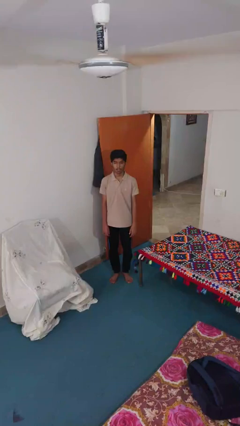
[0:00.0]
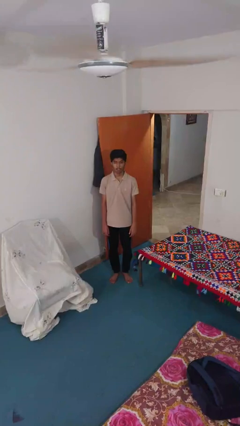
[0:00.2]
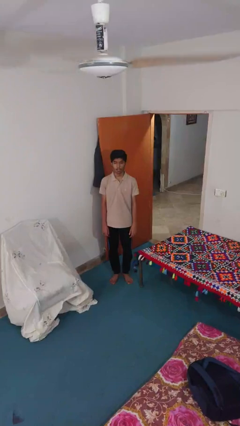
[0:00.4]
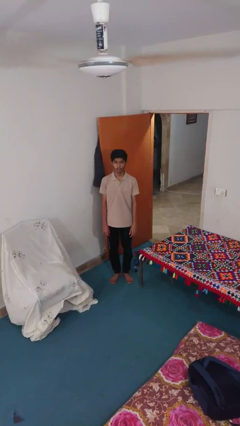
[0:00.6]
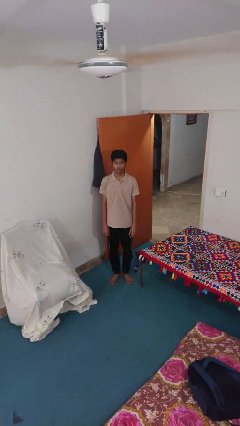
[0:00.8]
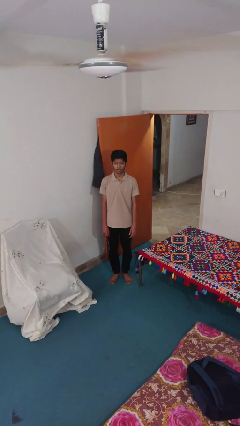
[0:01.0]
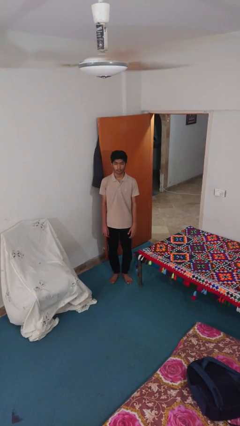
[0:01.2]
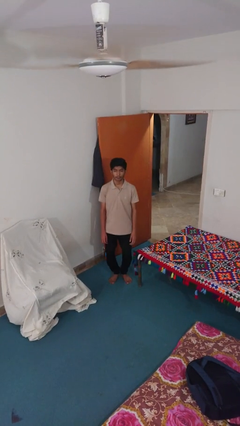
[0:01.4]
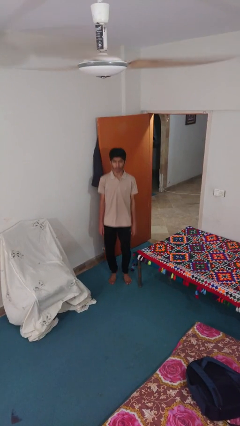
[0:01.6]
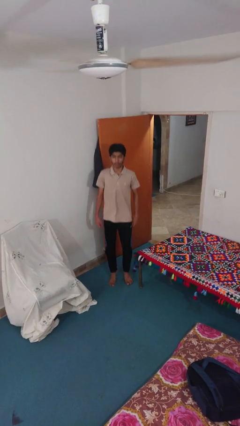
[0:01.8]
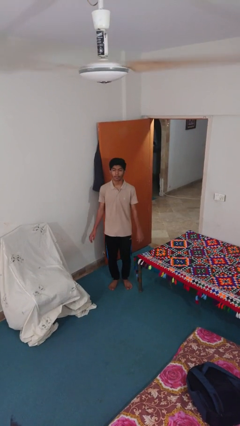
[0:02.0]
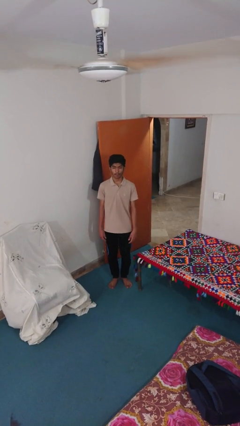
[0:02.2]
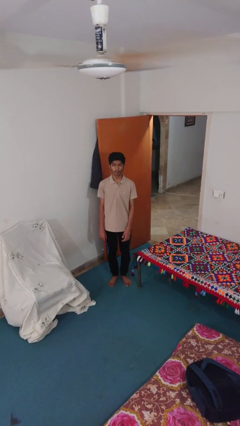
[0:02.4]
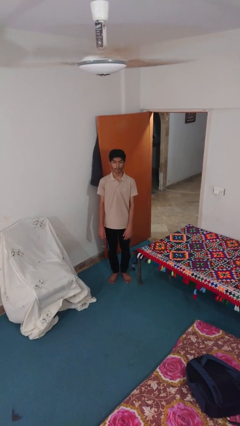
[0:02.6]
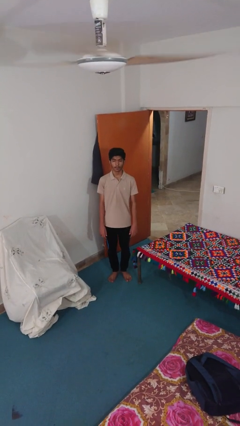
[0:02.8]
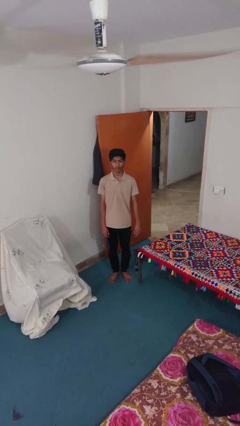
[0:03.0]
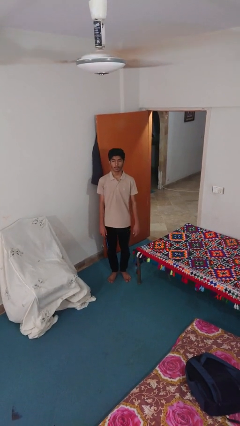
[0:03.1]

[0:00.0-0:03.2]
person jumps

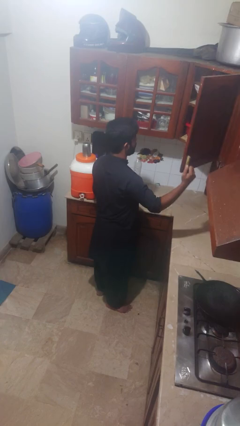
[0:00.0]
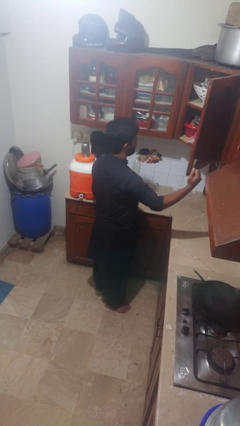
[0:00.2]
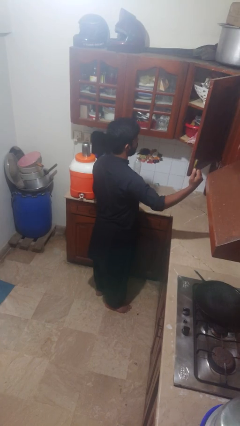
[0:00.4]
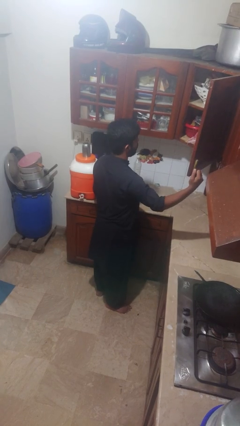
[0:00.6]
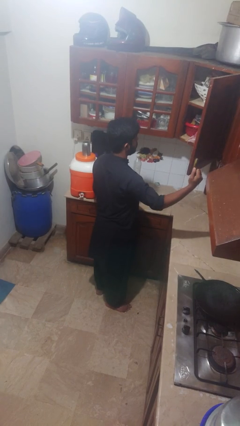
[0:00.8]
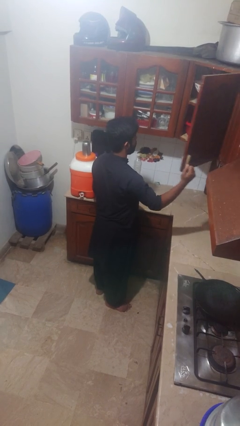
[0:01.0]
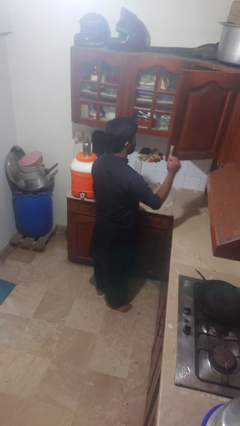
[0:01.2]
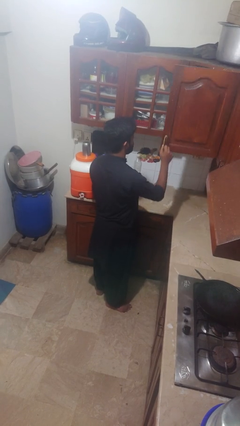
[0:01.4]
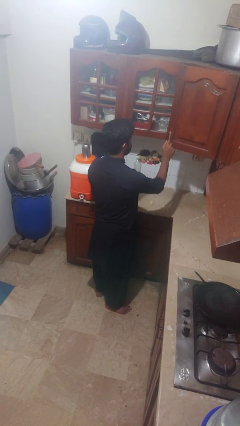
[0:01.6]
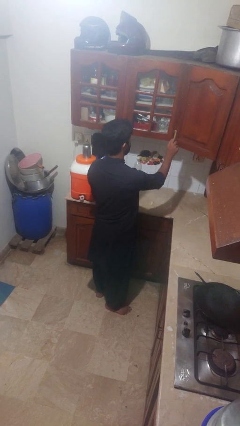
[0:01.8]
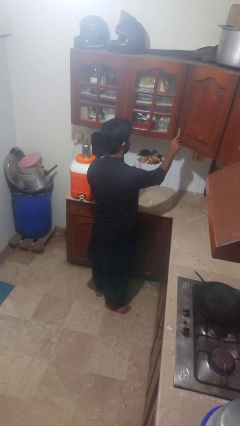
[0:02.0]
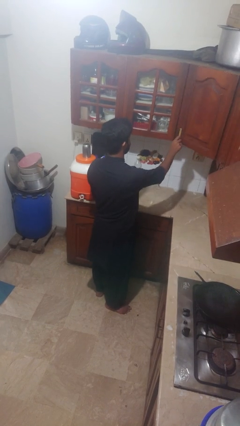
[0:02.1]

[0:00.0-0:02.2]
person closes cabinet

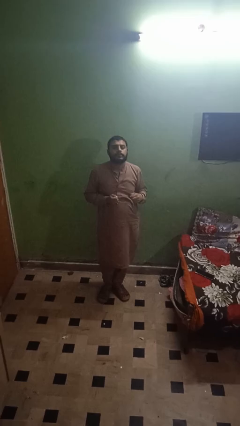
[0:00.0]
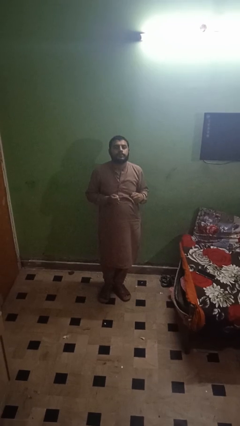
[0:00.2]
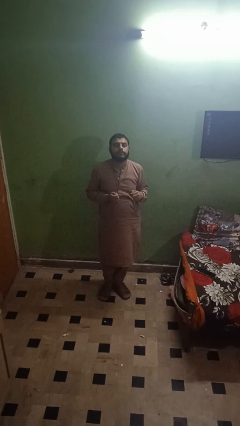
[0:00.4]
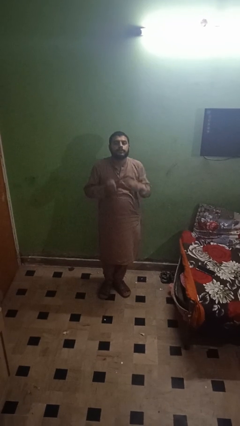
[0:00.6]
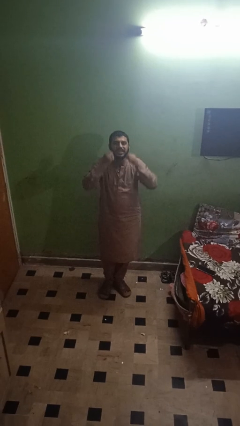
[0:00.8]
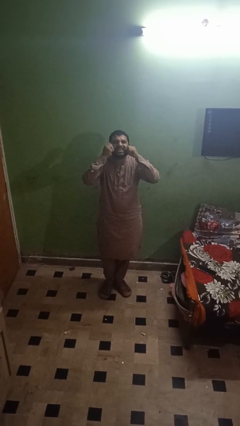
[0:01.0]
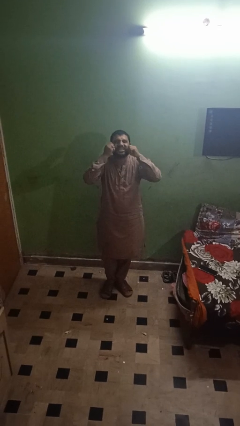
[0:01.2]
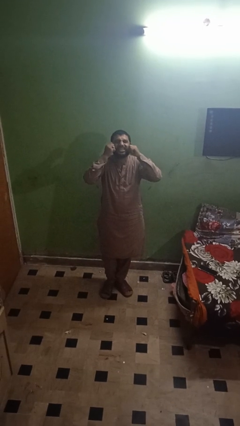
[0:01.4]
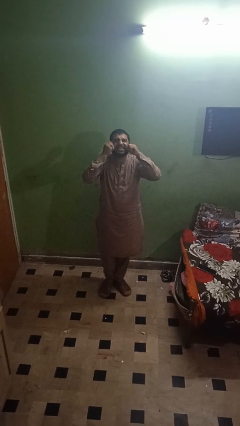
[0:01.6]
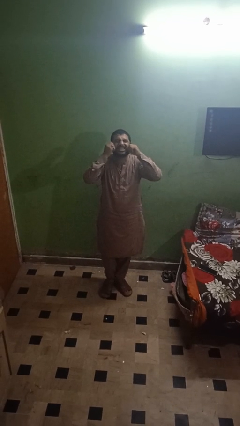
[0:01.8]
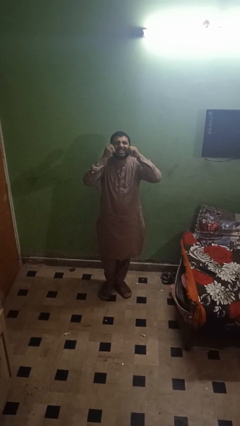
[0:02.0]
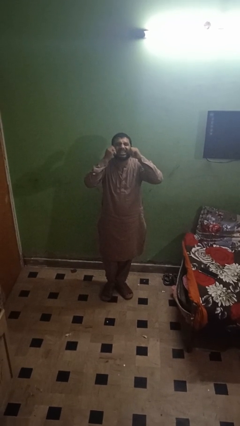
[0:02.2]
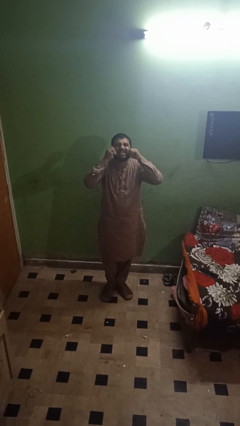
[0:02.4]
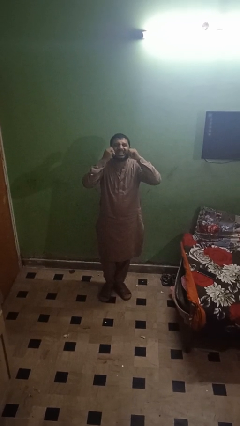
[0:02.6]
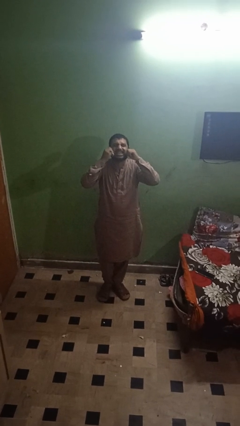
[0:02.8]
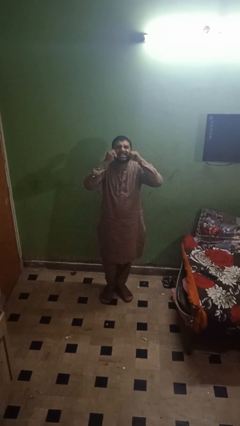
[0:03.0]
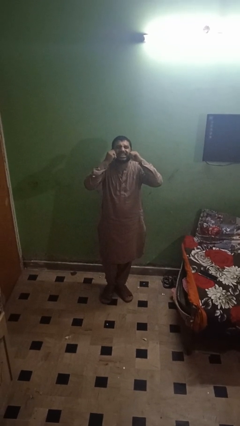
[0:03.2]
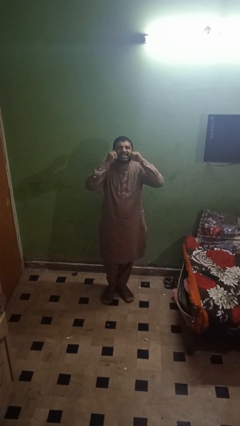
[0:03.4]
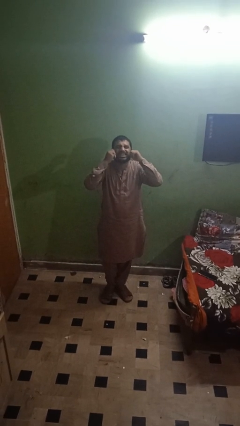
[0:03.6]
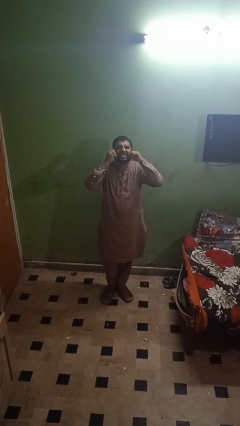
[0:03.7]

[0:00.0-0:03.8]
person flosses

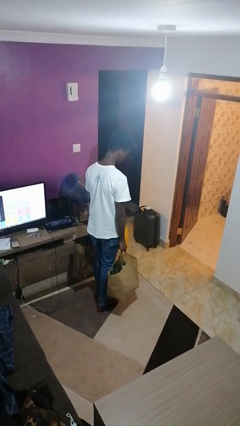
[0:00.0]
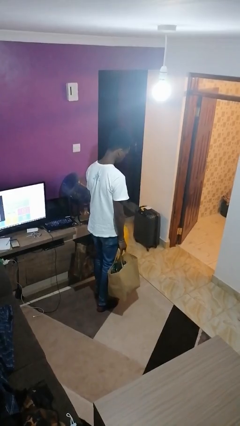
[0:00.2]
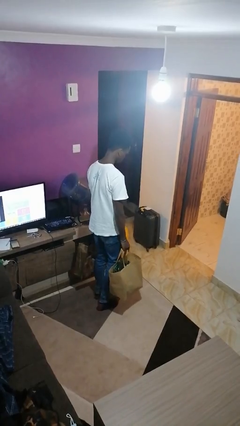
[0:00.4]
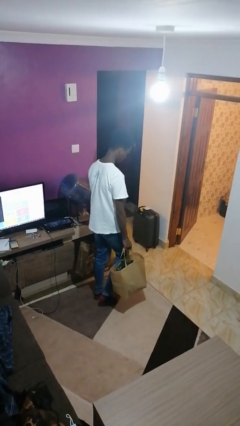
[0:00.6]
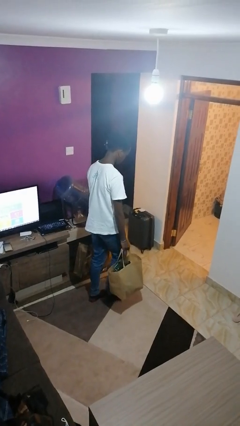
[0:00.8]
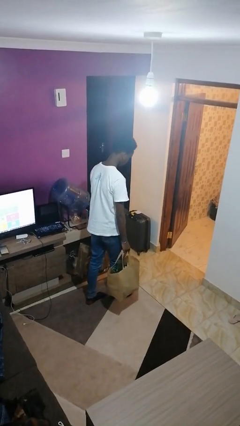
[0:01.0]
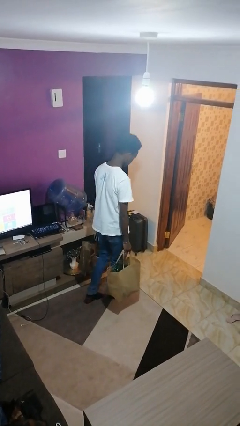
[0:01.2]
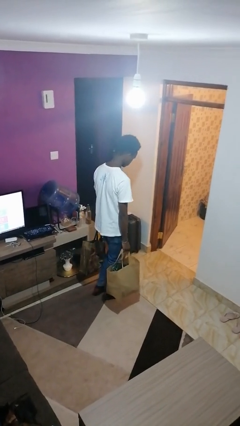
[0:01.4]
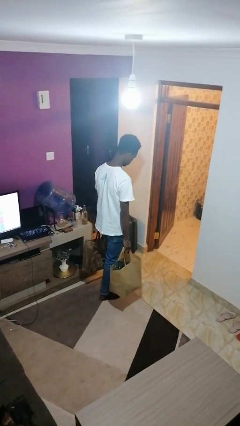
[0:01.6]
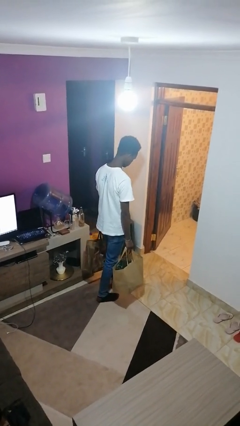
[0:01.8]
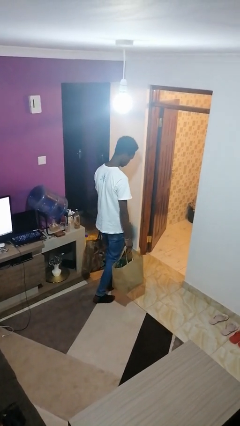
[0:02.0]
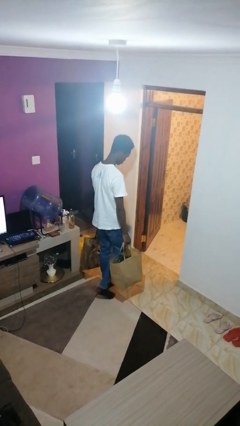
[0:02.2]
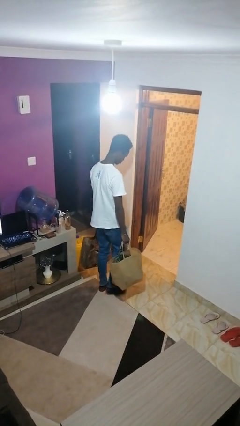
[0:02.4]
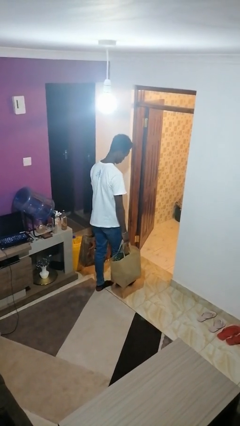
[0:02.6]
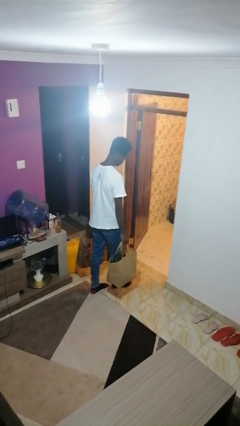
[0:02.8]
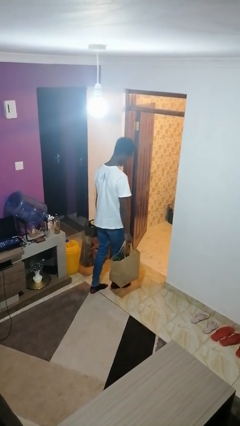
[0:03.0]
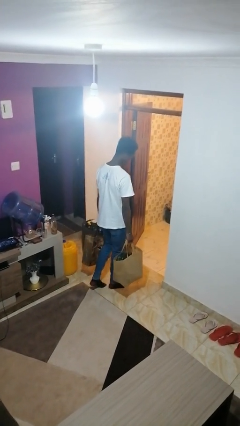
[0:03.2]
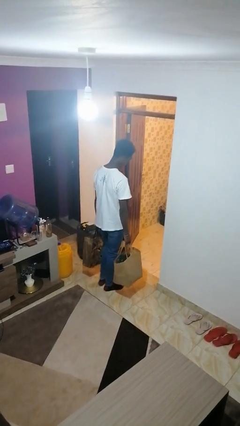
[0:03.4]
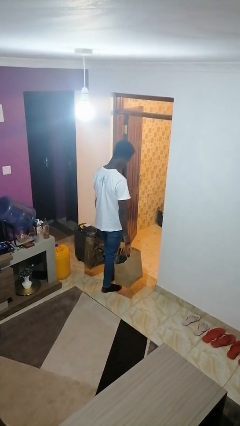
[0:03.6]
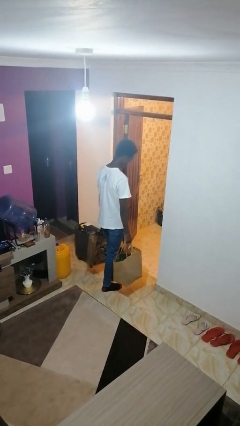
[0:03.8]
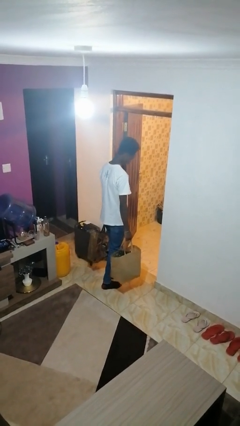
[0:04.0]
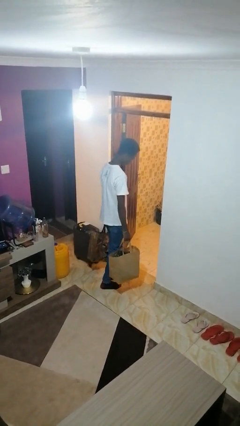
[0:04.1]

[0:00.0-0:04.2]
person carries groceries

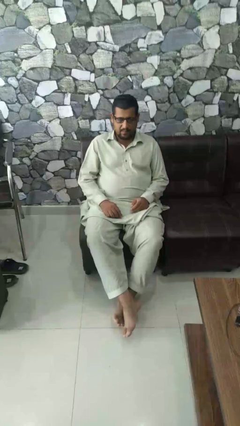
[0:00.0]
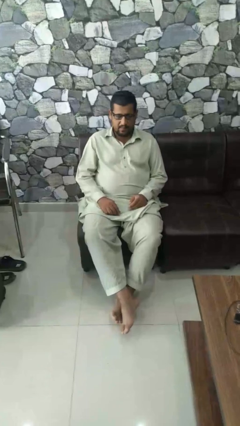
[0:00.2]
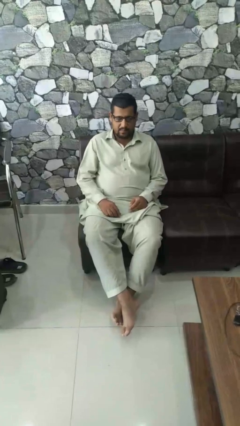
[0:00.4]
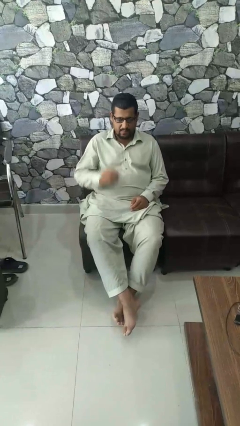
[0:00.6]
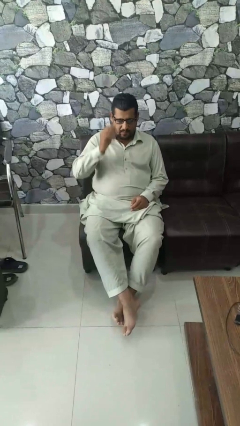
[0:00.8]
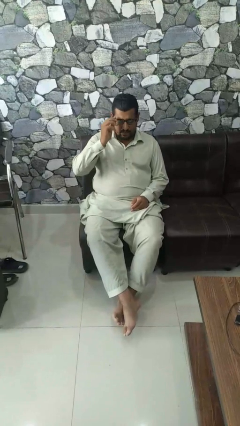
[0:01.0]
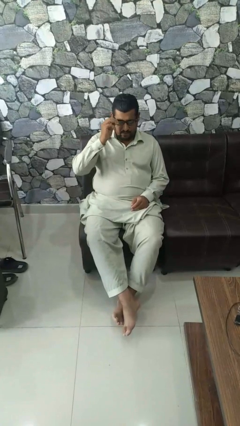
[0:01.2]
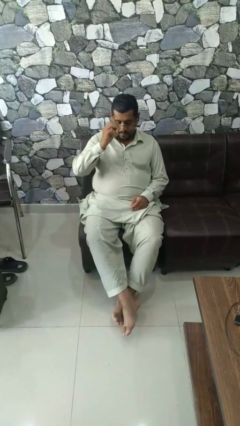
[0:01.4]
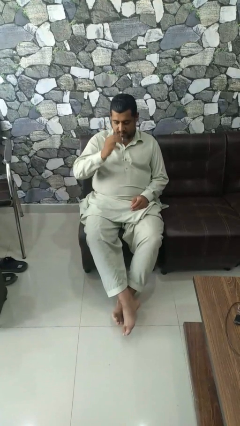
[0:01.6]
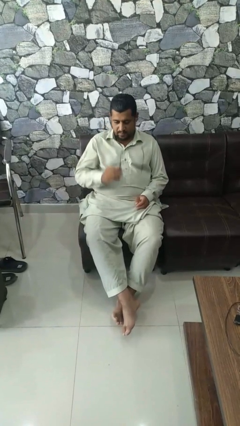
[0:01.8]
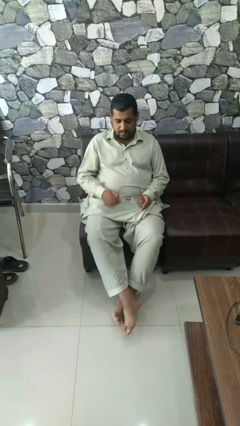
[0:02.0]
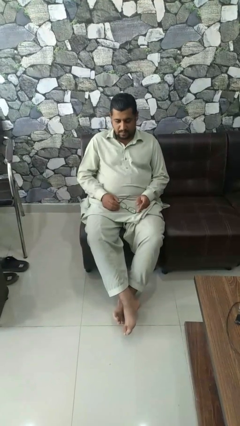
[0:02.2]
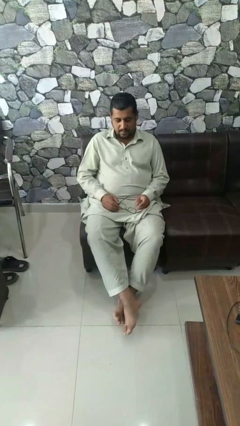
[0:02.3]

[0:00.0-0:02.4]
person takes off glasses

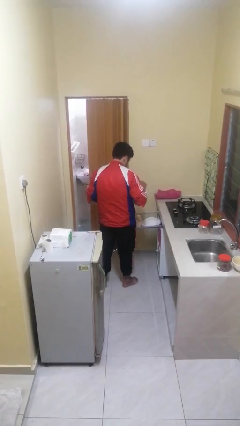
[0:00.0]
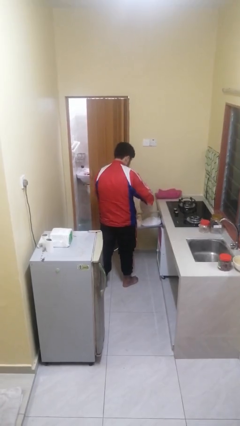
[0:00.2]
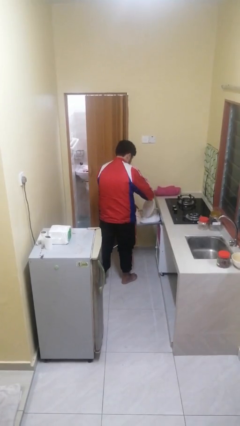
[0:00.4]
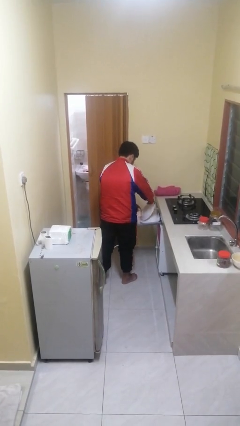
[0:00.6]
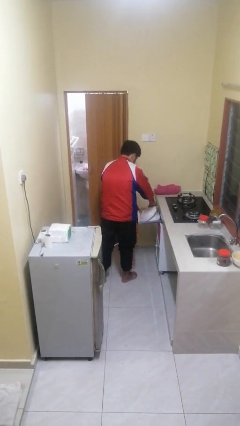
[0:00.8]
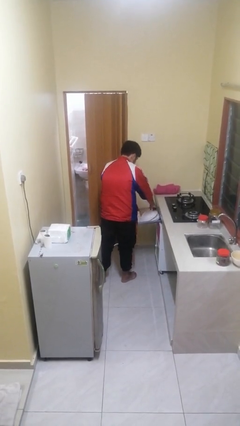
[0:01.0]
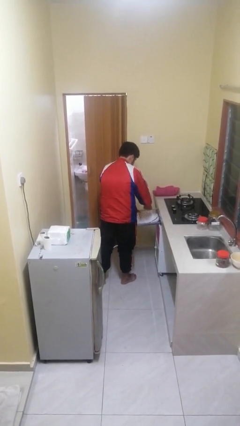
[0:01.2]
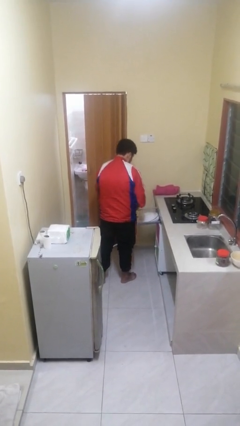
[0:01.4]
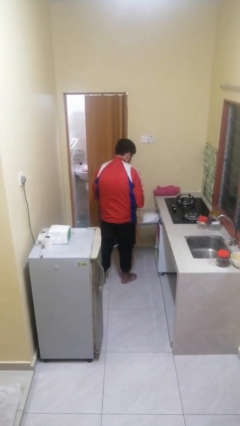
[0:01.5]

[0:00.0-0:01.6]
person puts object into kitchen drawer
